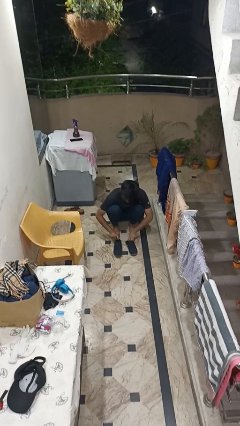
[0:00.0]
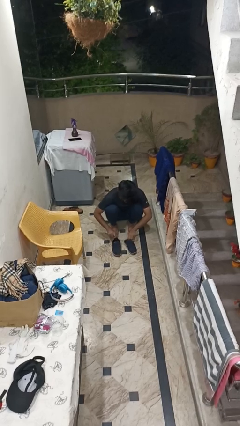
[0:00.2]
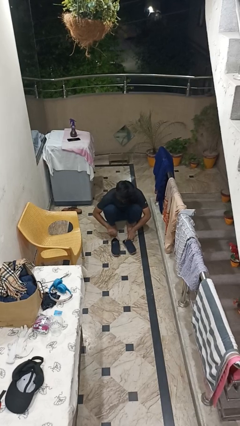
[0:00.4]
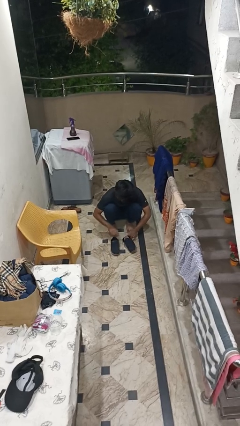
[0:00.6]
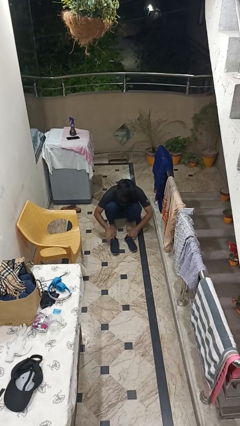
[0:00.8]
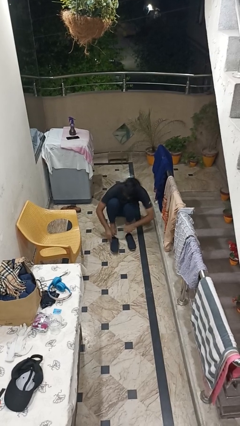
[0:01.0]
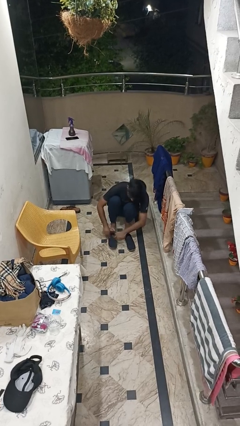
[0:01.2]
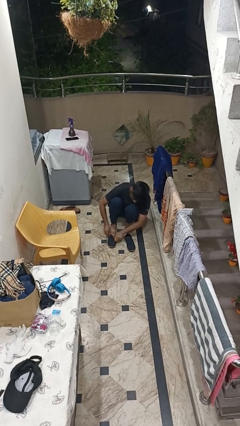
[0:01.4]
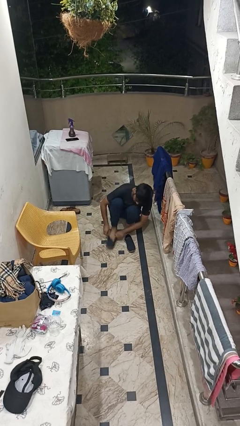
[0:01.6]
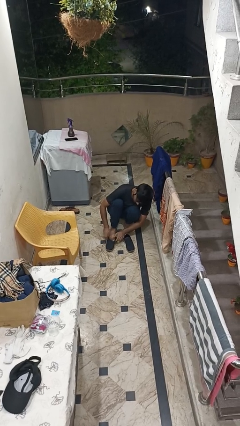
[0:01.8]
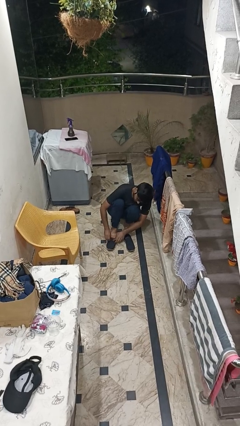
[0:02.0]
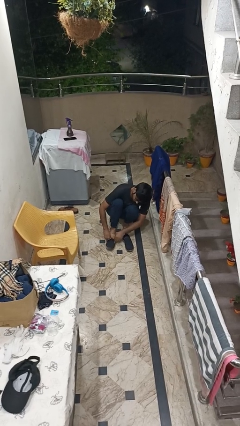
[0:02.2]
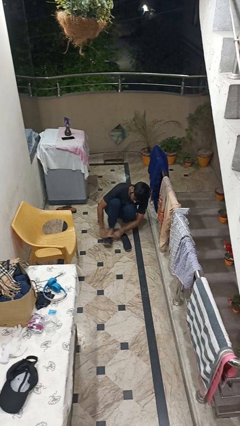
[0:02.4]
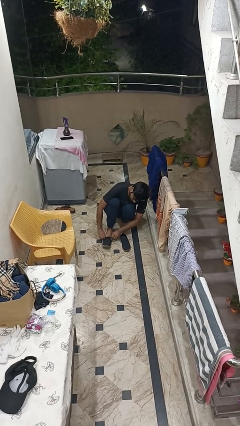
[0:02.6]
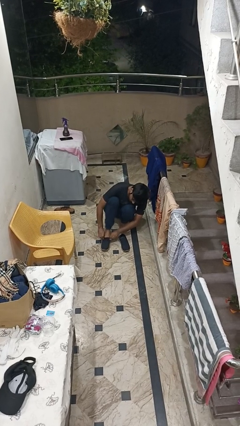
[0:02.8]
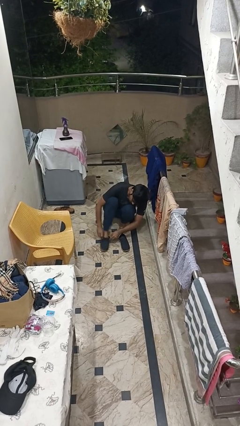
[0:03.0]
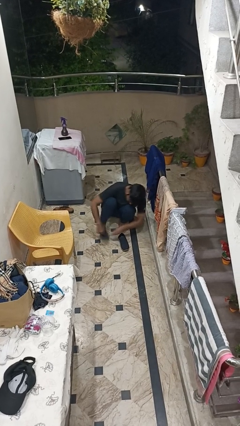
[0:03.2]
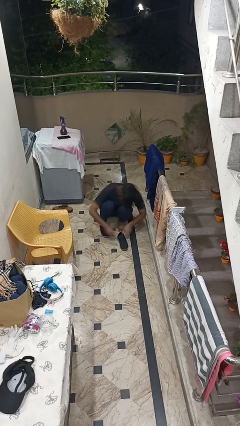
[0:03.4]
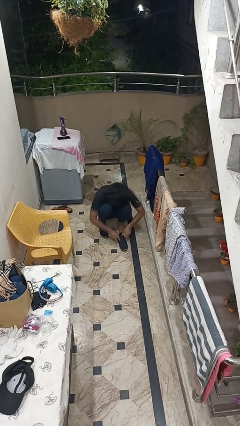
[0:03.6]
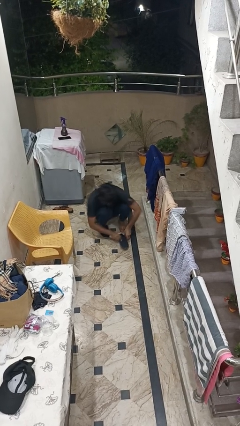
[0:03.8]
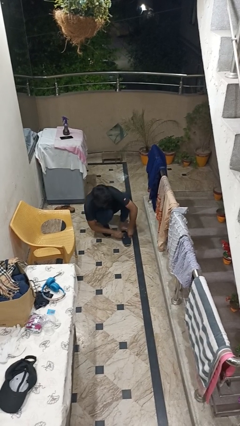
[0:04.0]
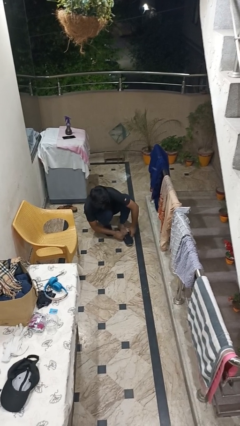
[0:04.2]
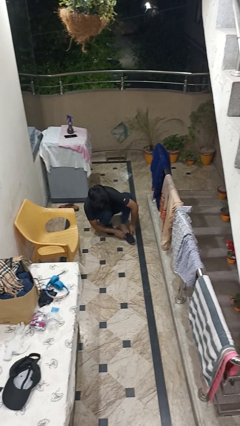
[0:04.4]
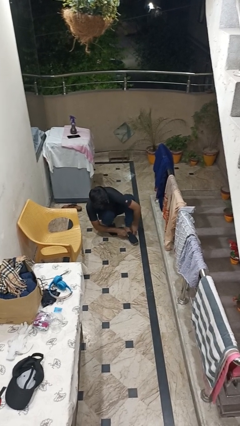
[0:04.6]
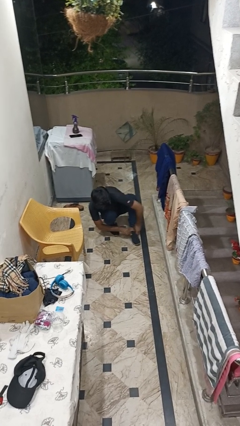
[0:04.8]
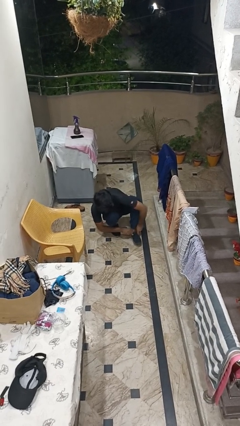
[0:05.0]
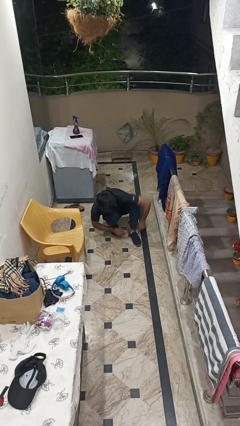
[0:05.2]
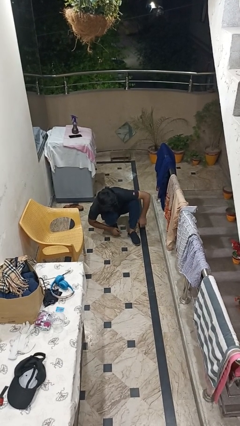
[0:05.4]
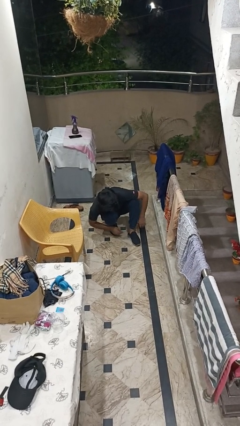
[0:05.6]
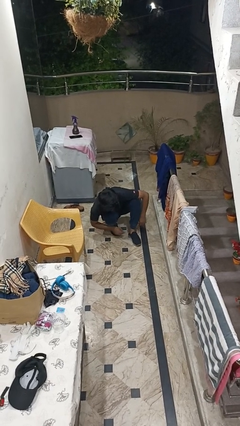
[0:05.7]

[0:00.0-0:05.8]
person puts on shoes

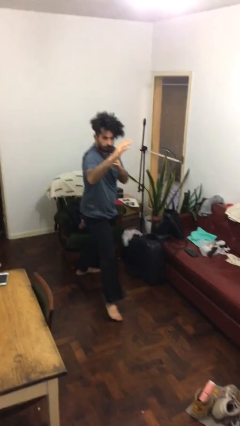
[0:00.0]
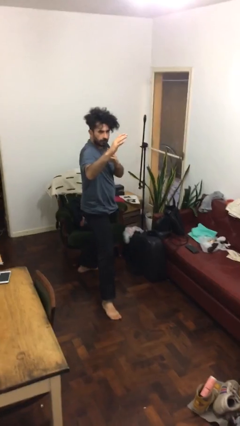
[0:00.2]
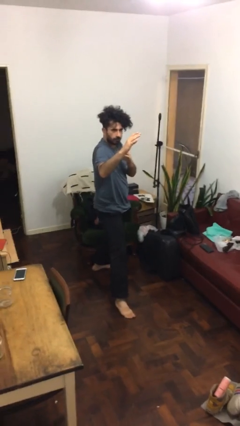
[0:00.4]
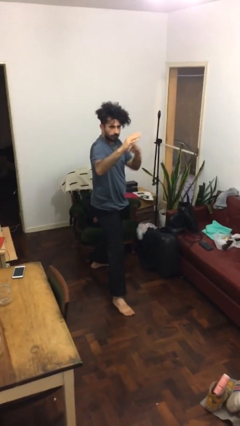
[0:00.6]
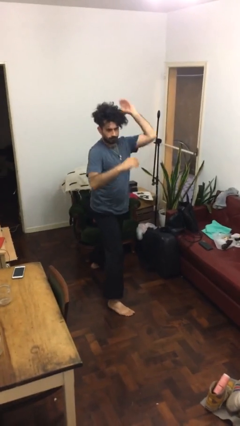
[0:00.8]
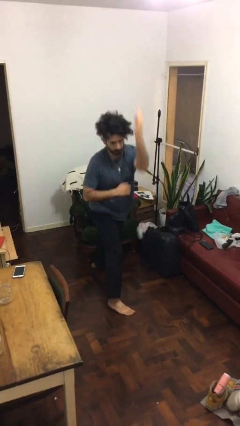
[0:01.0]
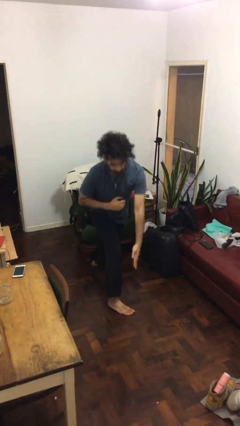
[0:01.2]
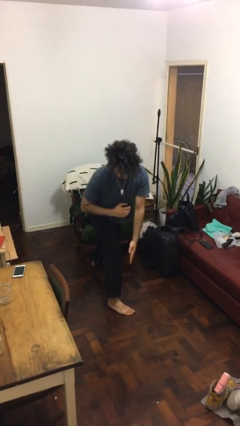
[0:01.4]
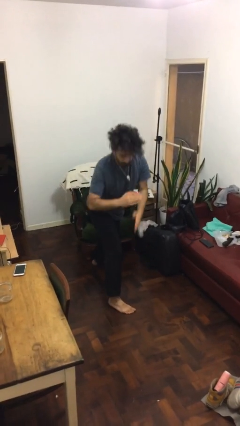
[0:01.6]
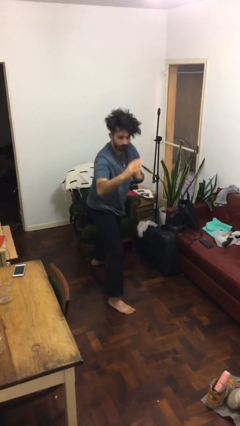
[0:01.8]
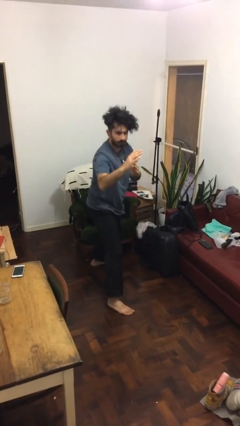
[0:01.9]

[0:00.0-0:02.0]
person karate chop

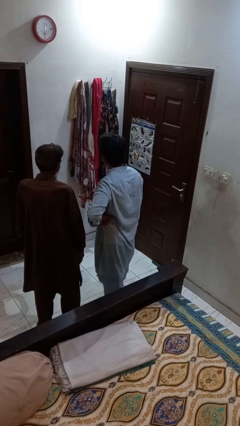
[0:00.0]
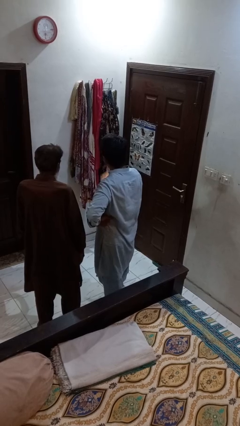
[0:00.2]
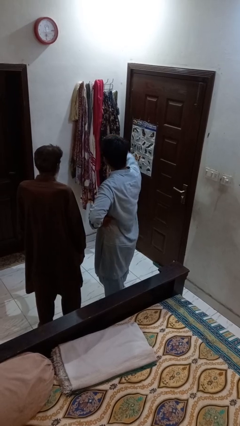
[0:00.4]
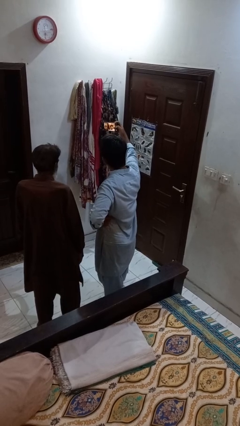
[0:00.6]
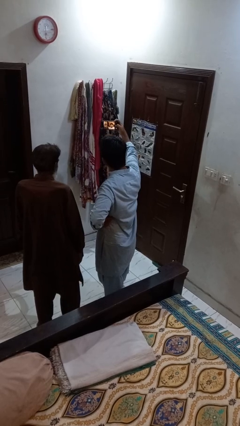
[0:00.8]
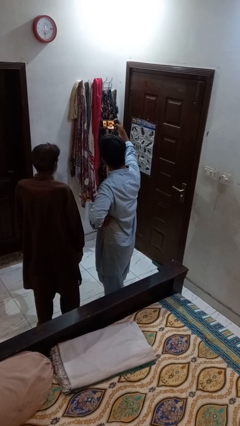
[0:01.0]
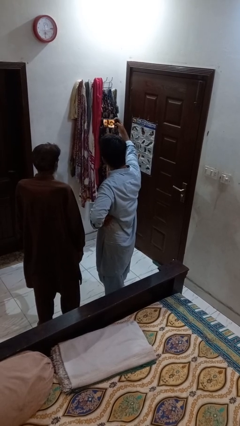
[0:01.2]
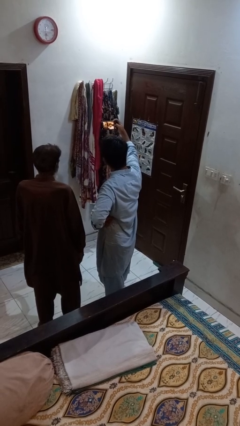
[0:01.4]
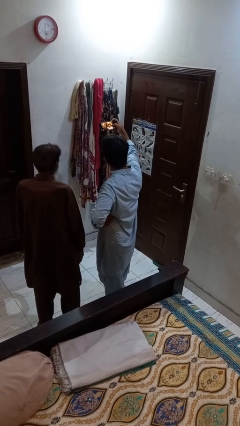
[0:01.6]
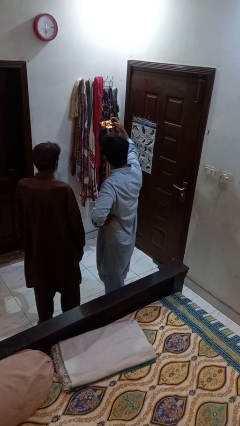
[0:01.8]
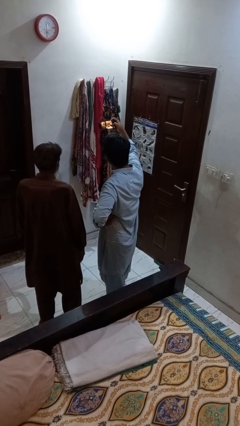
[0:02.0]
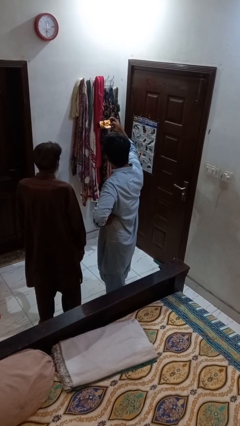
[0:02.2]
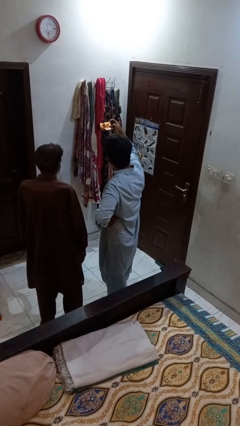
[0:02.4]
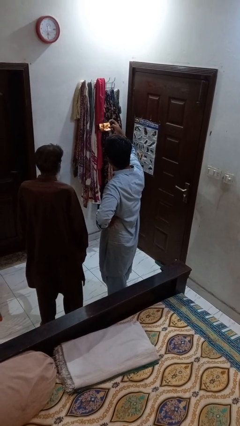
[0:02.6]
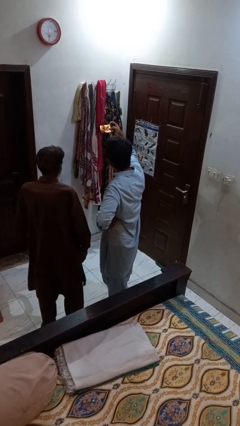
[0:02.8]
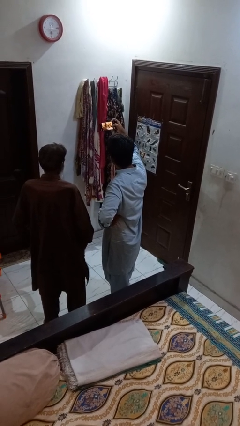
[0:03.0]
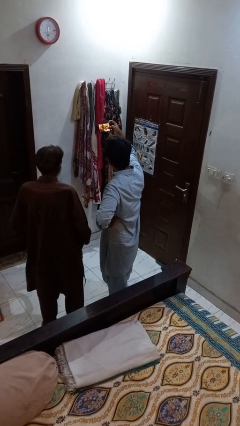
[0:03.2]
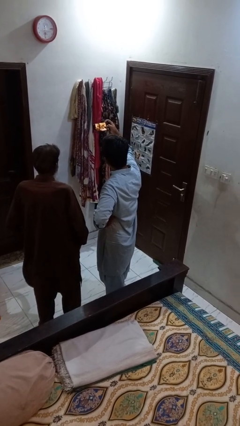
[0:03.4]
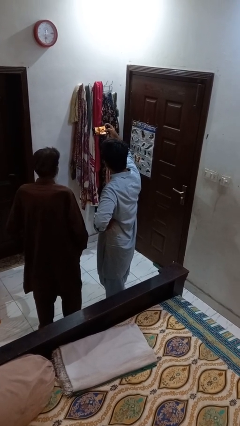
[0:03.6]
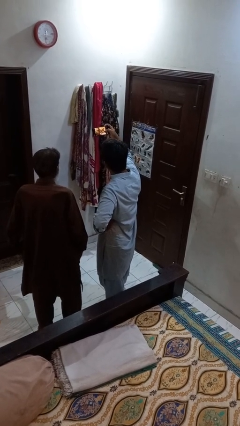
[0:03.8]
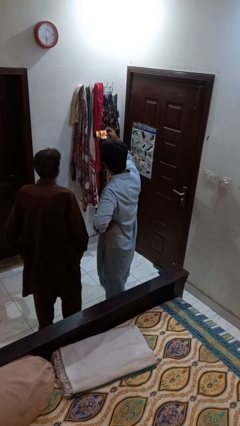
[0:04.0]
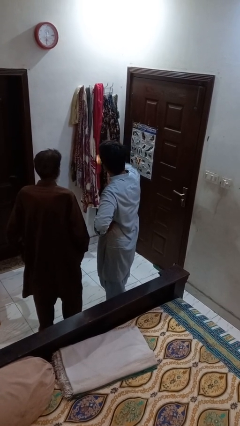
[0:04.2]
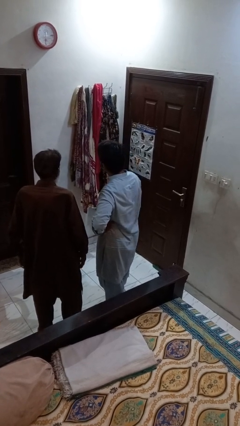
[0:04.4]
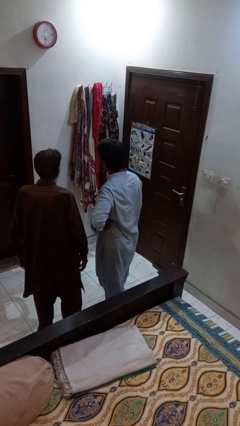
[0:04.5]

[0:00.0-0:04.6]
person takes selfie with person

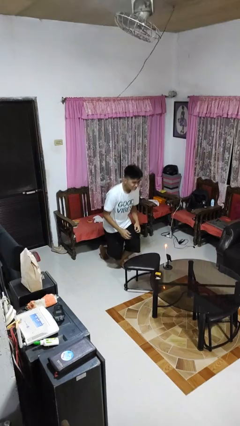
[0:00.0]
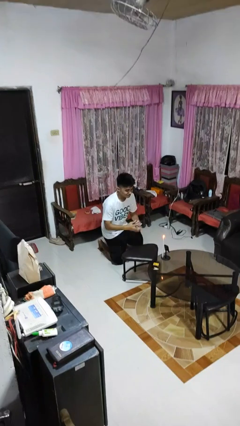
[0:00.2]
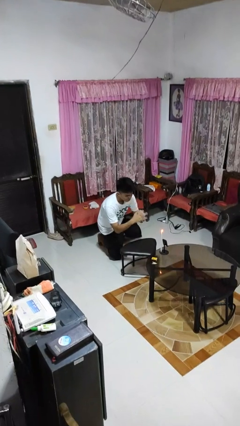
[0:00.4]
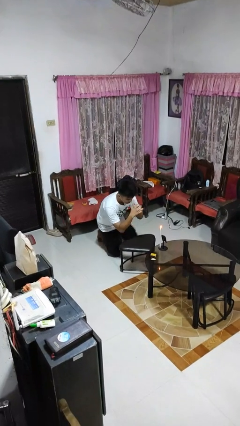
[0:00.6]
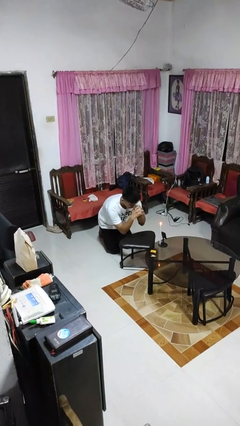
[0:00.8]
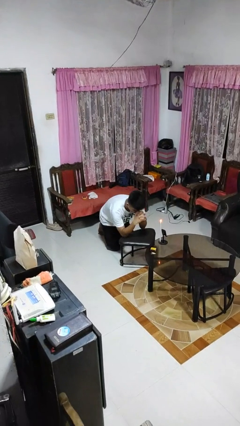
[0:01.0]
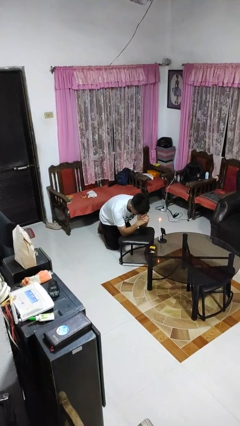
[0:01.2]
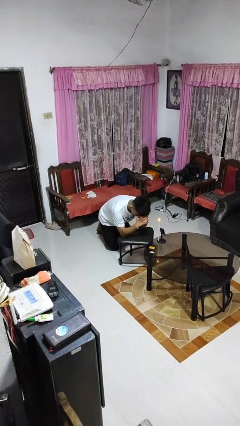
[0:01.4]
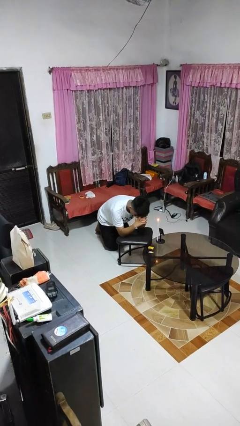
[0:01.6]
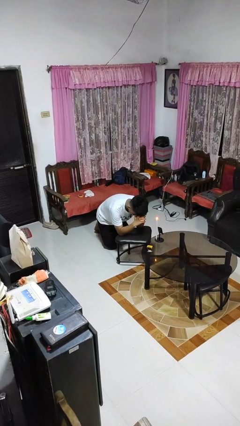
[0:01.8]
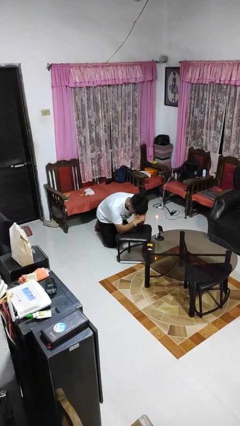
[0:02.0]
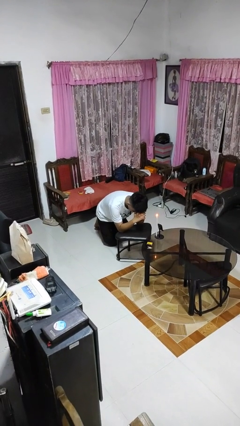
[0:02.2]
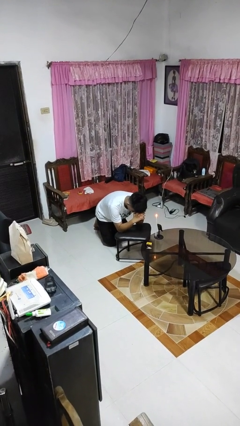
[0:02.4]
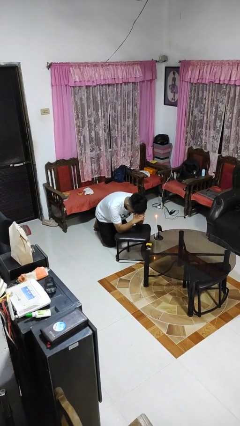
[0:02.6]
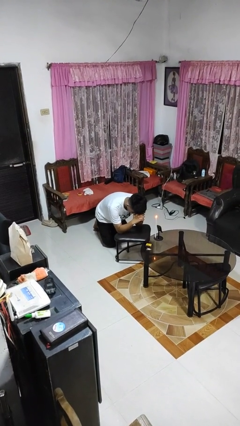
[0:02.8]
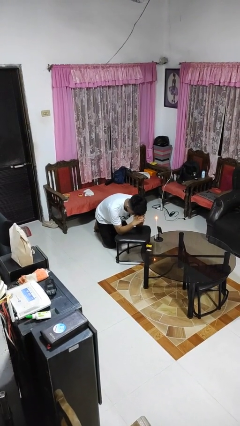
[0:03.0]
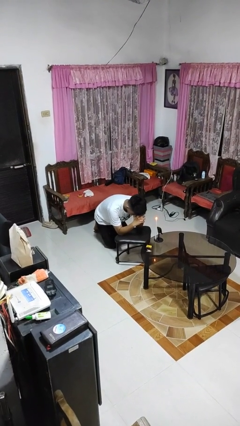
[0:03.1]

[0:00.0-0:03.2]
person prays

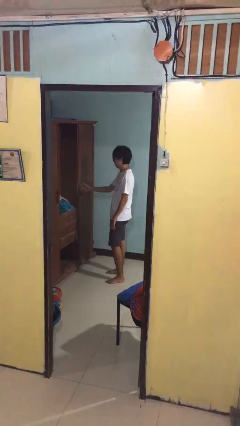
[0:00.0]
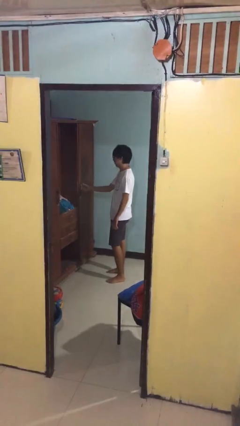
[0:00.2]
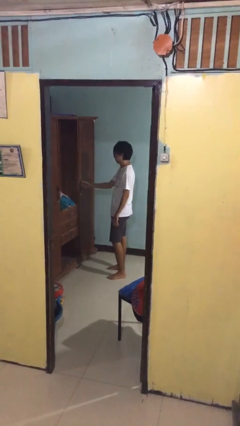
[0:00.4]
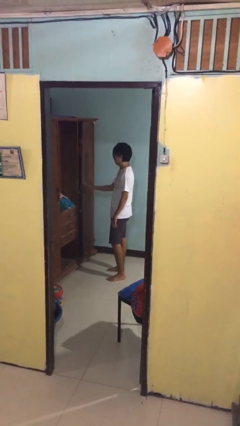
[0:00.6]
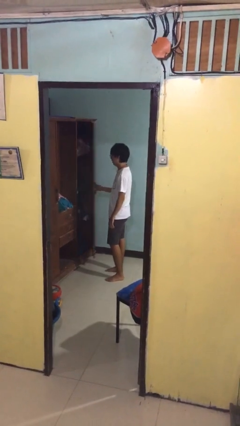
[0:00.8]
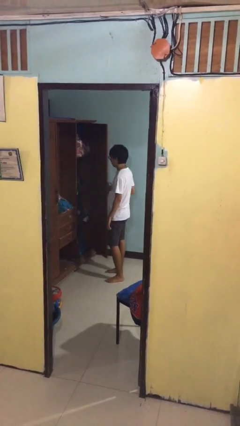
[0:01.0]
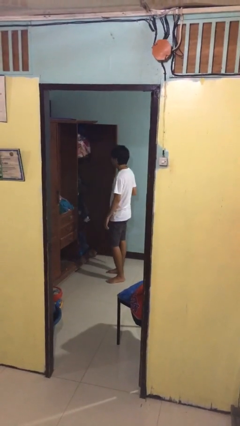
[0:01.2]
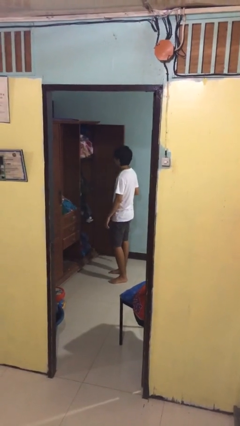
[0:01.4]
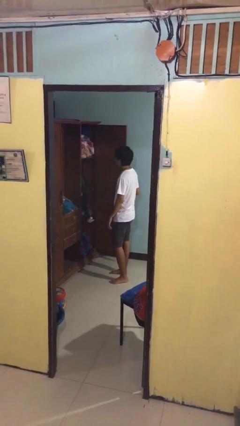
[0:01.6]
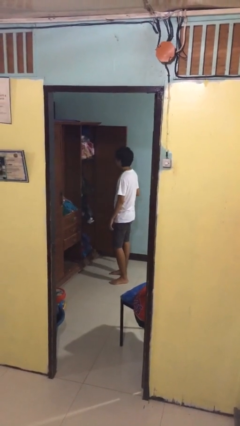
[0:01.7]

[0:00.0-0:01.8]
person opens closet door
